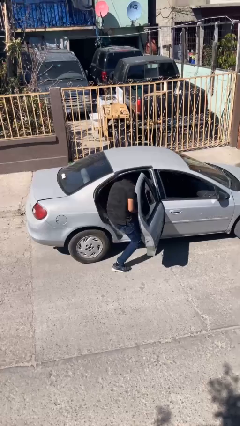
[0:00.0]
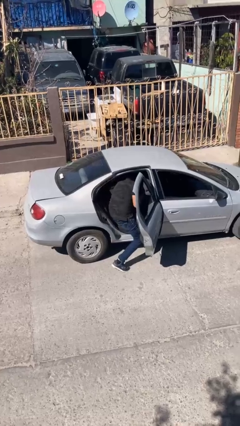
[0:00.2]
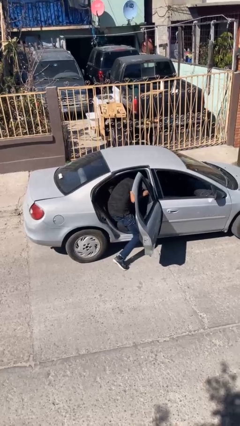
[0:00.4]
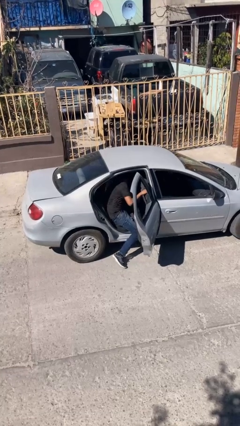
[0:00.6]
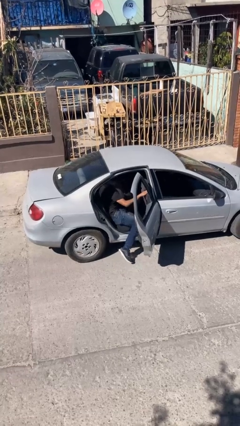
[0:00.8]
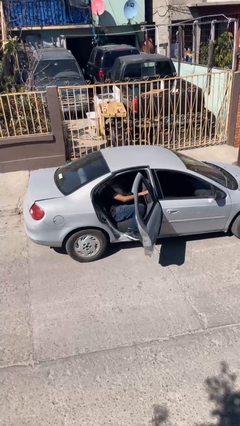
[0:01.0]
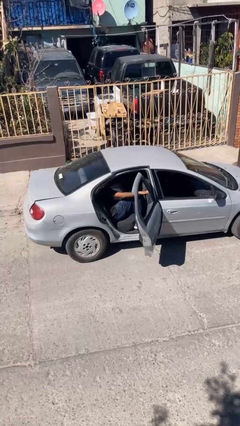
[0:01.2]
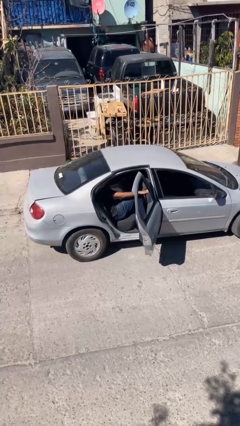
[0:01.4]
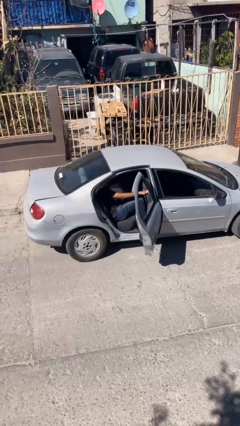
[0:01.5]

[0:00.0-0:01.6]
person enters car

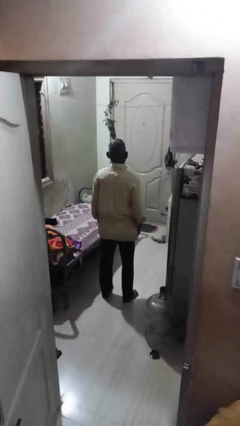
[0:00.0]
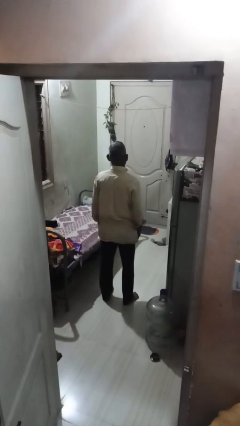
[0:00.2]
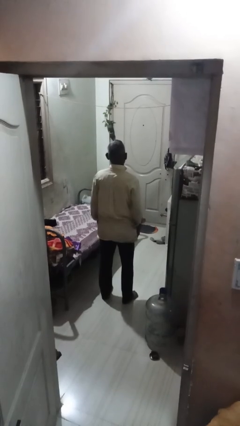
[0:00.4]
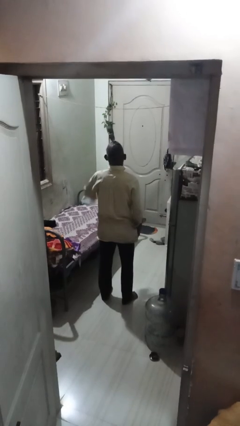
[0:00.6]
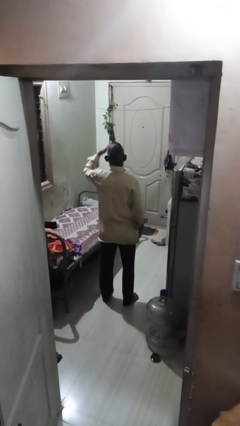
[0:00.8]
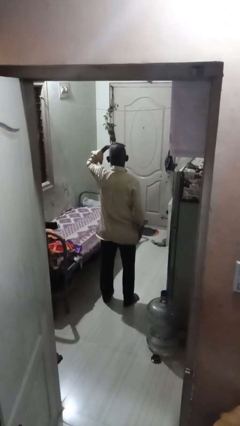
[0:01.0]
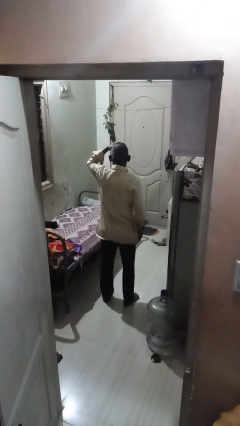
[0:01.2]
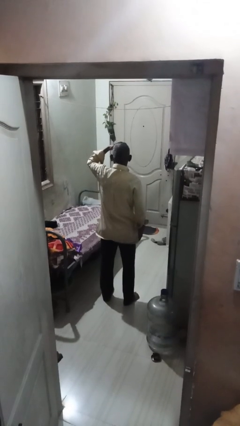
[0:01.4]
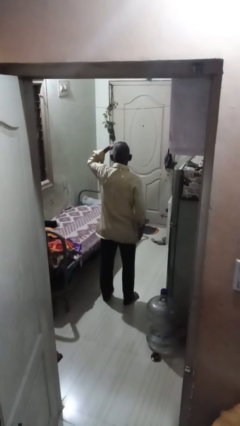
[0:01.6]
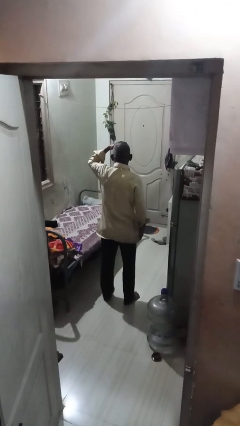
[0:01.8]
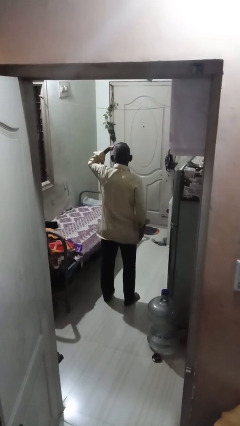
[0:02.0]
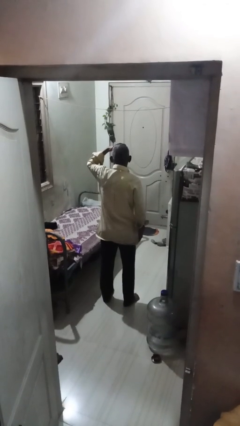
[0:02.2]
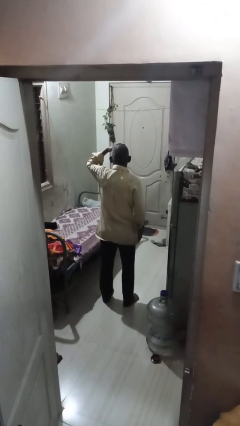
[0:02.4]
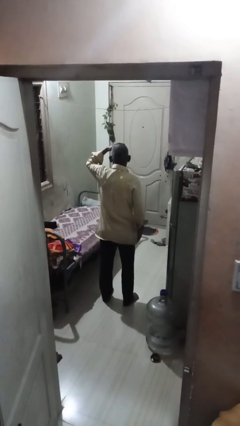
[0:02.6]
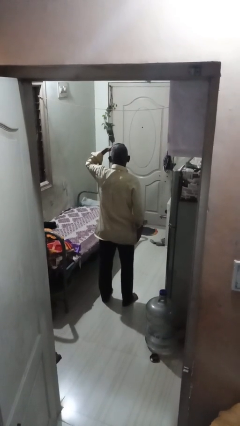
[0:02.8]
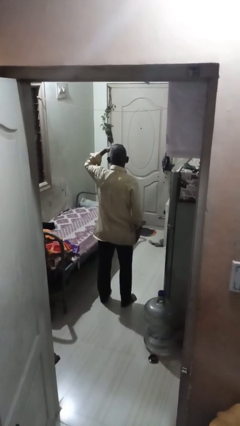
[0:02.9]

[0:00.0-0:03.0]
person shades eyes

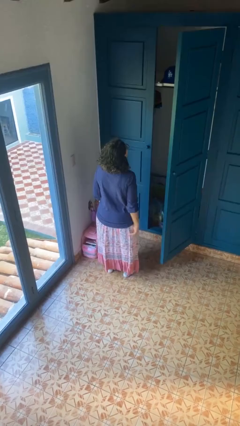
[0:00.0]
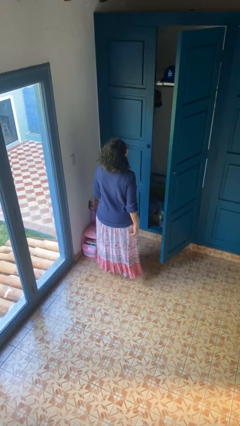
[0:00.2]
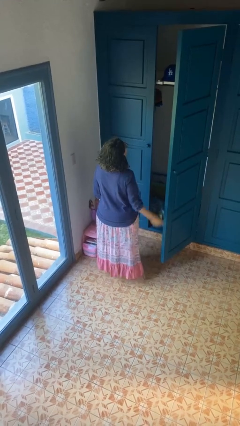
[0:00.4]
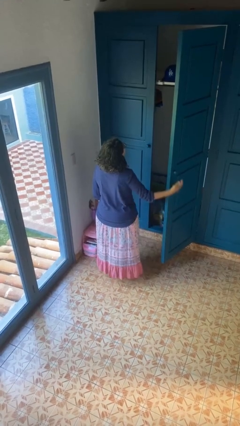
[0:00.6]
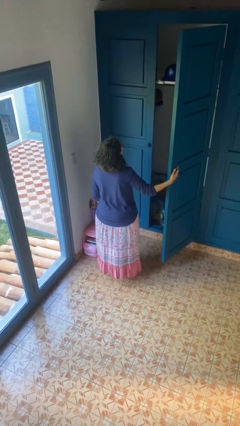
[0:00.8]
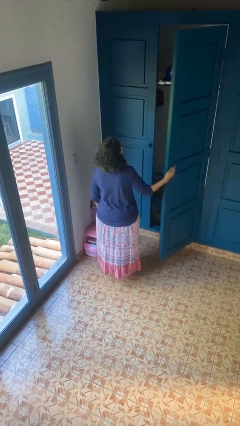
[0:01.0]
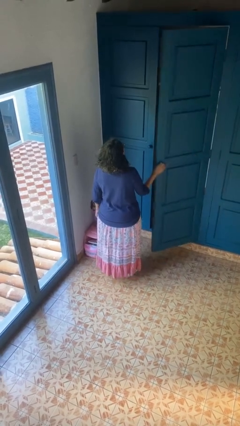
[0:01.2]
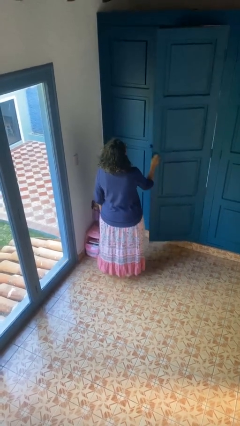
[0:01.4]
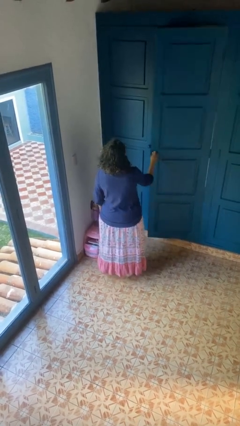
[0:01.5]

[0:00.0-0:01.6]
person closes closet door

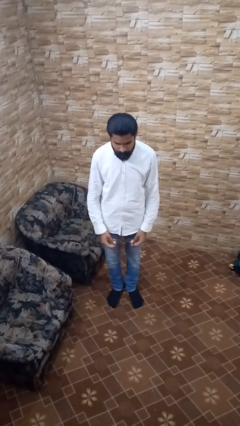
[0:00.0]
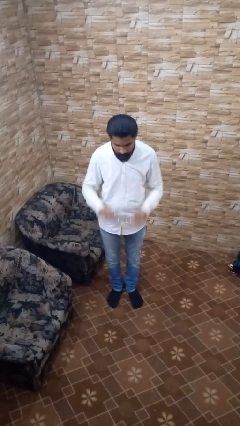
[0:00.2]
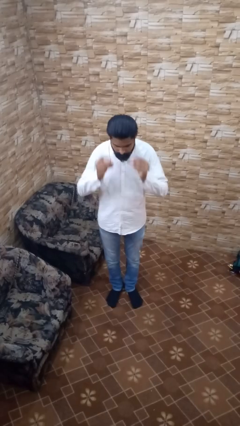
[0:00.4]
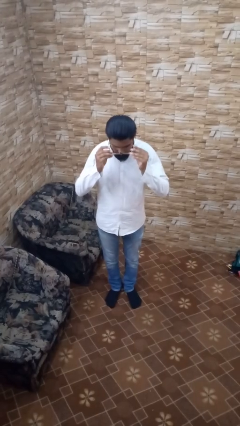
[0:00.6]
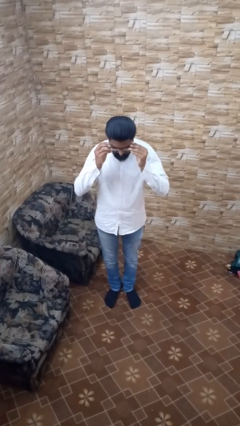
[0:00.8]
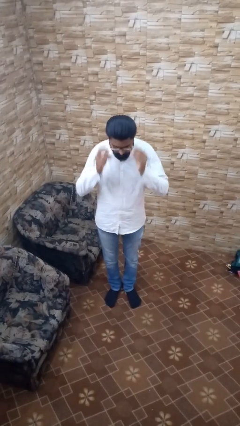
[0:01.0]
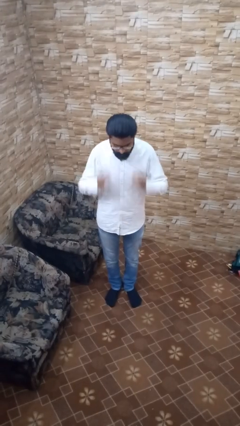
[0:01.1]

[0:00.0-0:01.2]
person puts on glasses

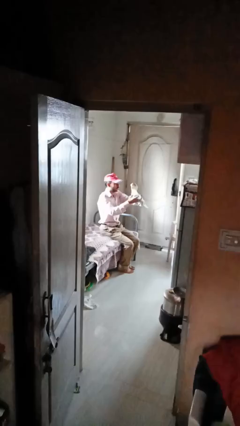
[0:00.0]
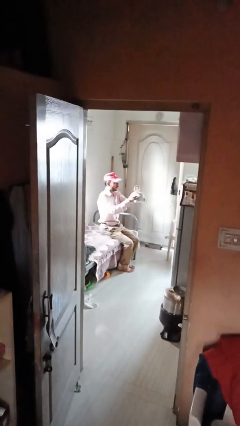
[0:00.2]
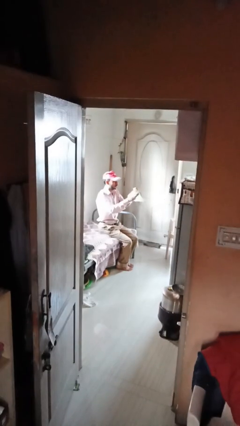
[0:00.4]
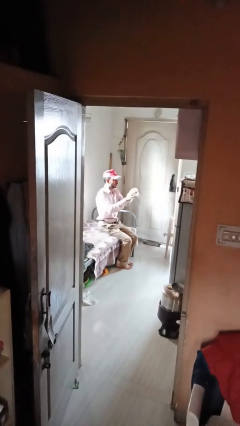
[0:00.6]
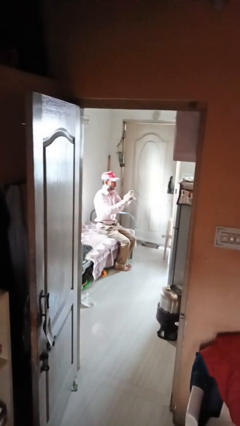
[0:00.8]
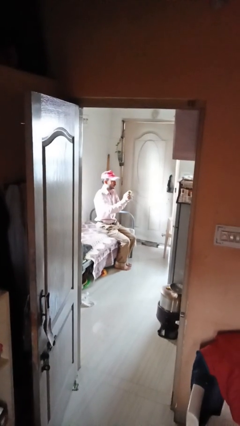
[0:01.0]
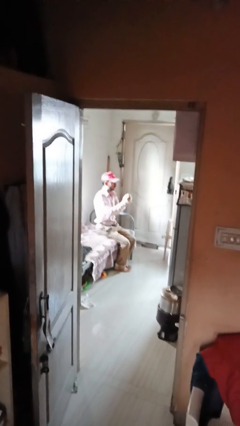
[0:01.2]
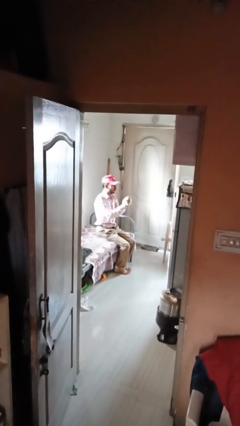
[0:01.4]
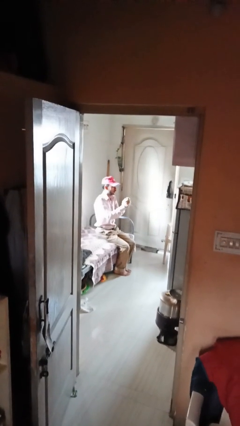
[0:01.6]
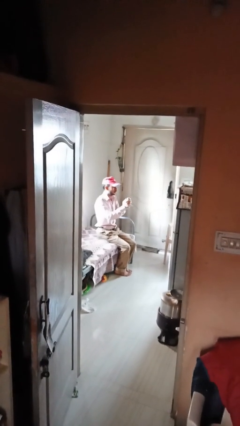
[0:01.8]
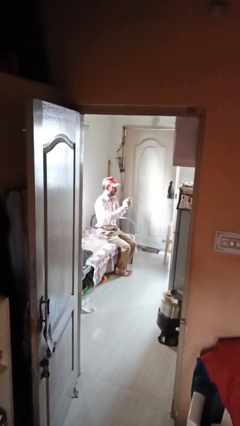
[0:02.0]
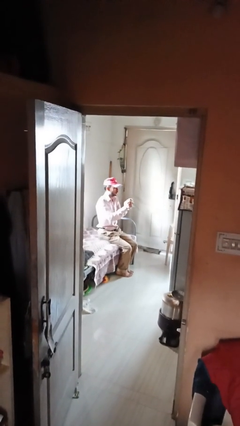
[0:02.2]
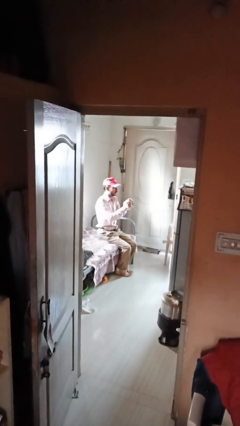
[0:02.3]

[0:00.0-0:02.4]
person crumples paper

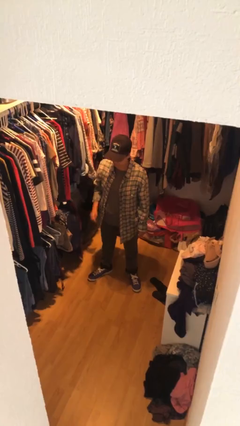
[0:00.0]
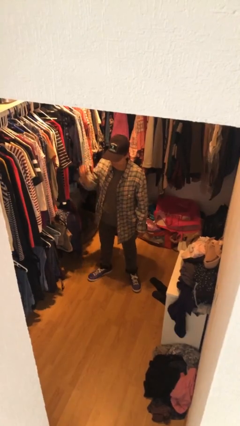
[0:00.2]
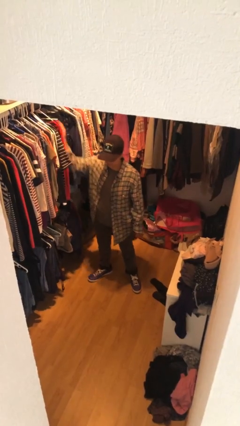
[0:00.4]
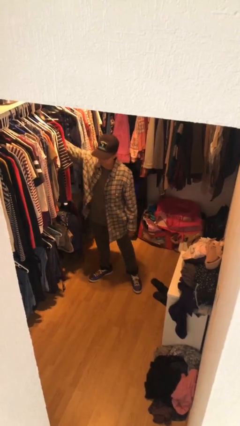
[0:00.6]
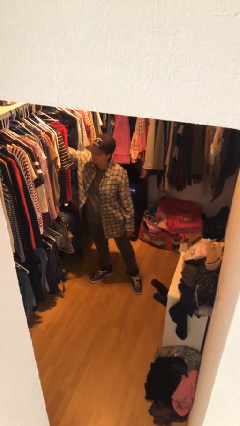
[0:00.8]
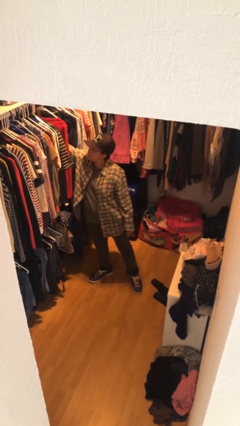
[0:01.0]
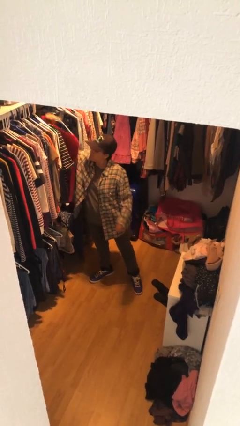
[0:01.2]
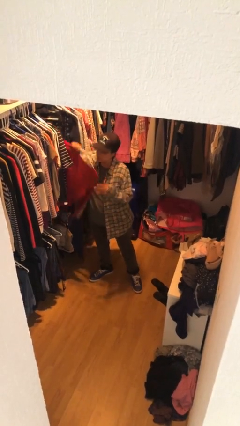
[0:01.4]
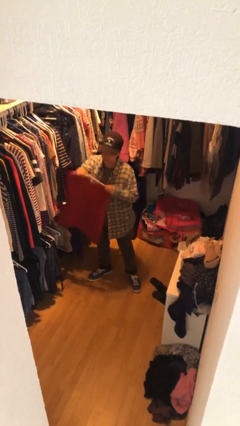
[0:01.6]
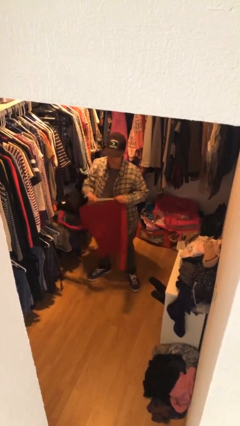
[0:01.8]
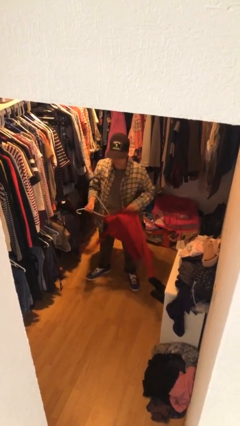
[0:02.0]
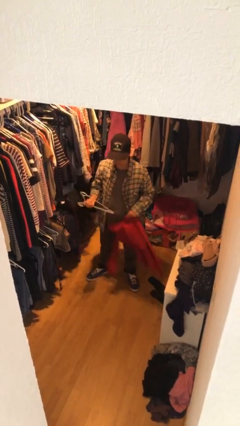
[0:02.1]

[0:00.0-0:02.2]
person takes clothes from closet

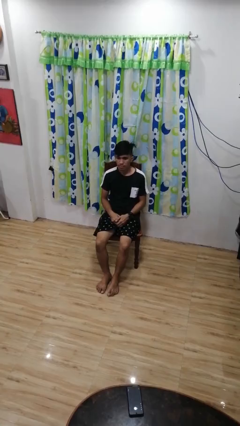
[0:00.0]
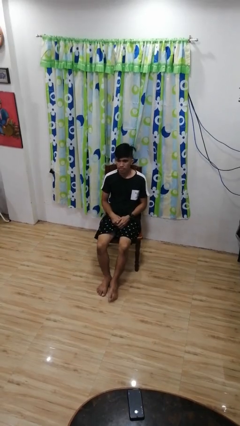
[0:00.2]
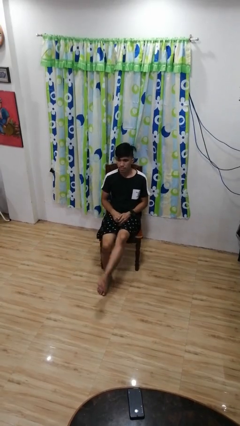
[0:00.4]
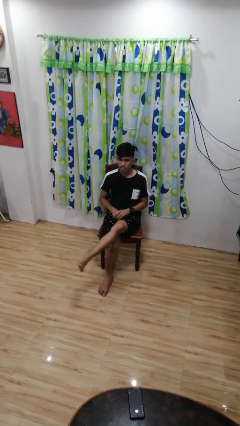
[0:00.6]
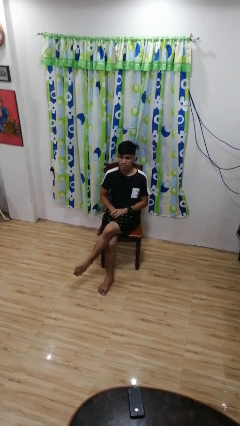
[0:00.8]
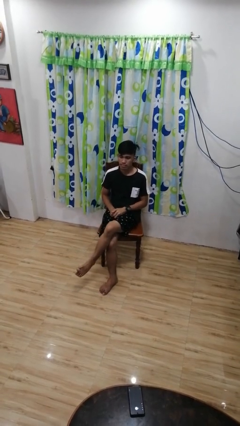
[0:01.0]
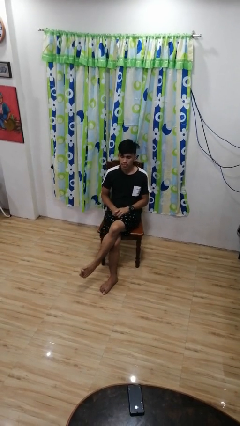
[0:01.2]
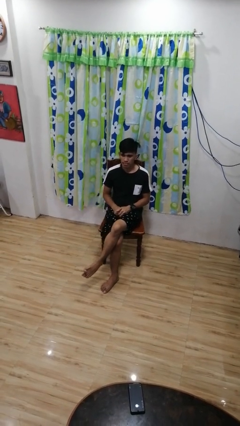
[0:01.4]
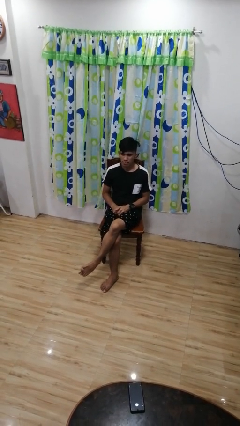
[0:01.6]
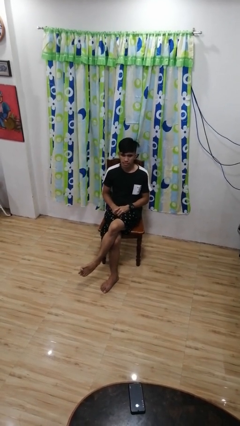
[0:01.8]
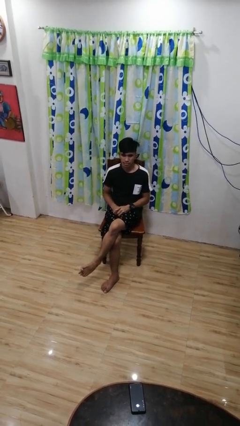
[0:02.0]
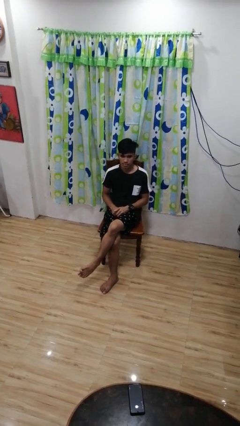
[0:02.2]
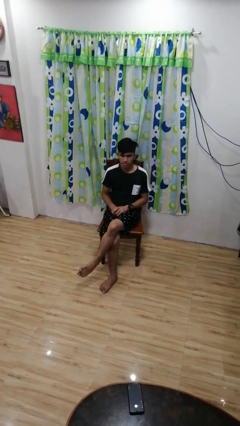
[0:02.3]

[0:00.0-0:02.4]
person crosses legs

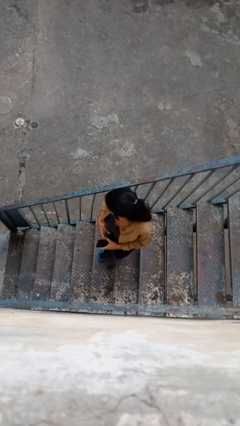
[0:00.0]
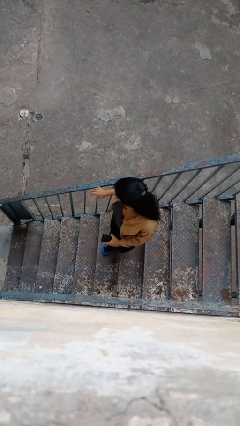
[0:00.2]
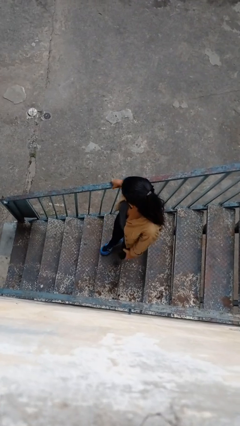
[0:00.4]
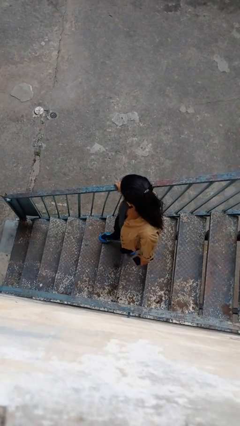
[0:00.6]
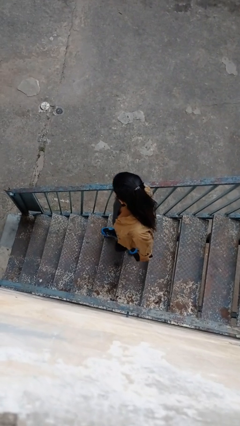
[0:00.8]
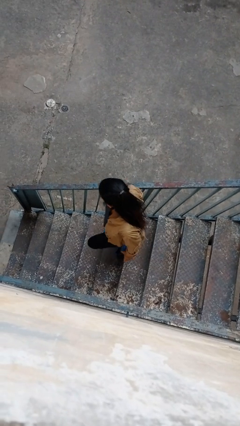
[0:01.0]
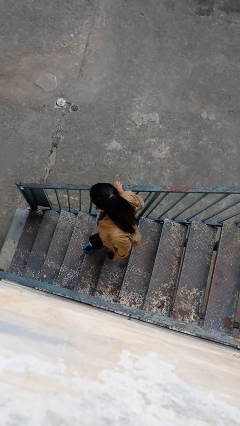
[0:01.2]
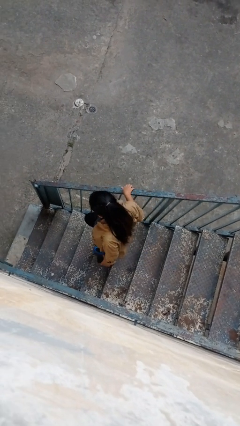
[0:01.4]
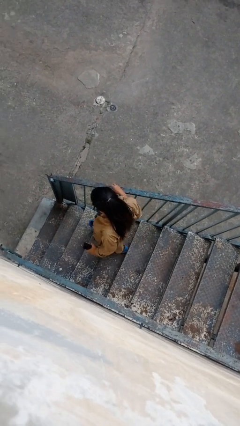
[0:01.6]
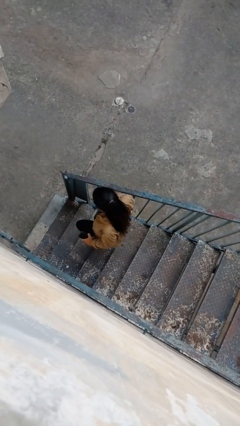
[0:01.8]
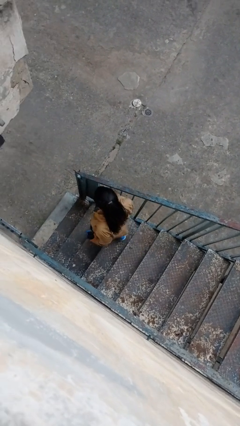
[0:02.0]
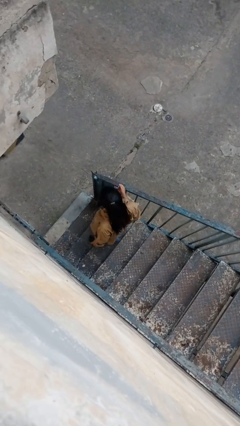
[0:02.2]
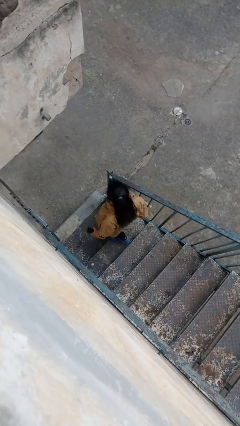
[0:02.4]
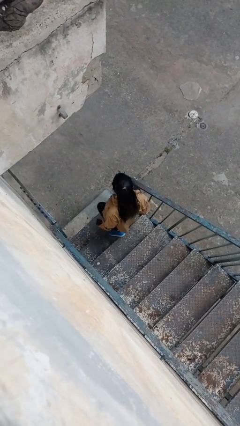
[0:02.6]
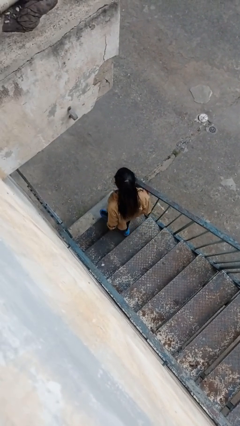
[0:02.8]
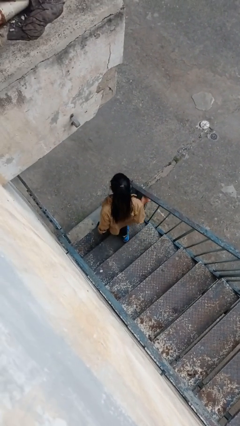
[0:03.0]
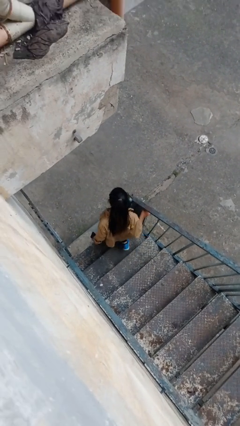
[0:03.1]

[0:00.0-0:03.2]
person climbs down stairs
